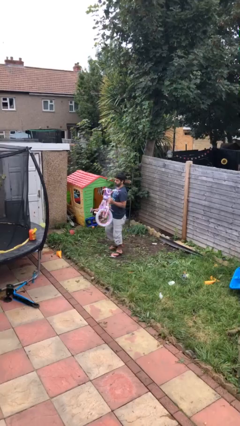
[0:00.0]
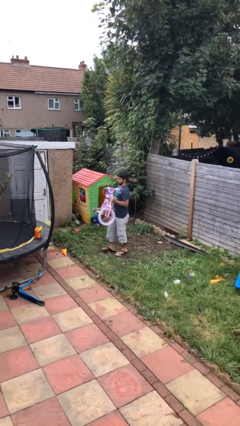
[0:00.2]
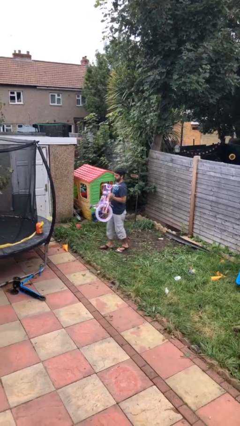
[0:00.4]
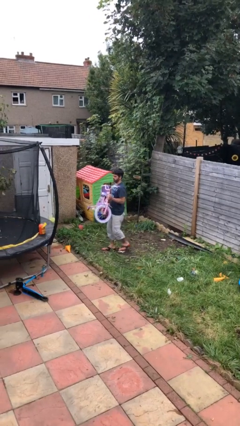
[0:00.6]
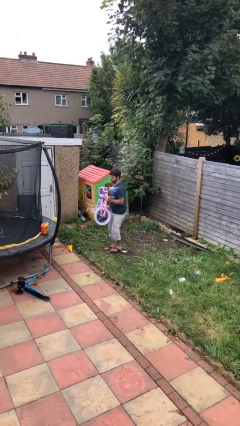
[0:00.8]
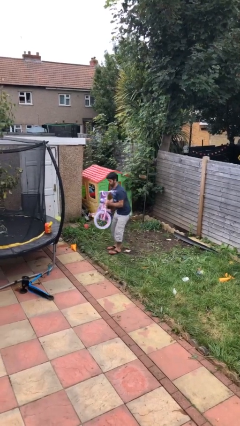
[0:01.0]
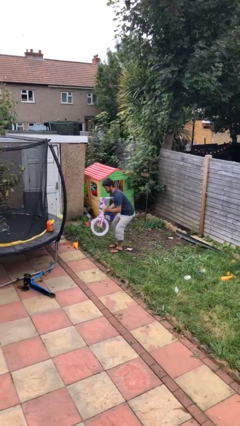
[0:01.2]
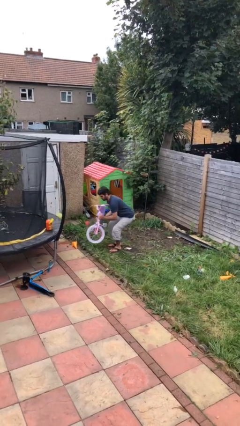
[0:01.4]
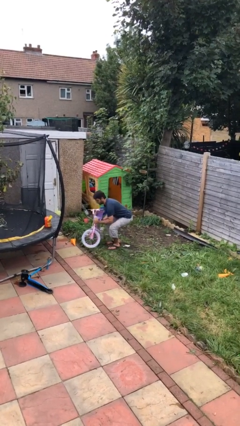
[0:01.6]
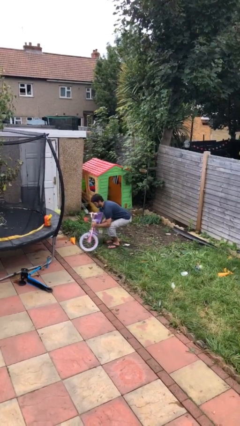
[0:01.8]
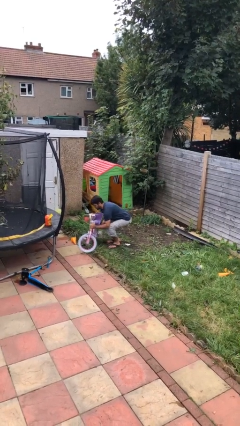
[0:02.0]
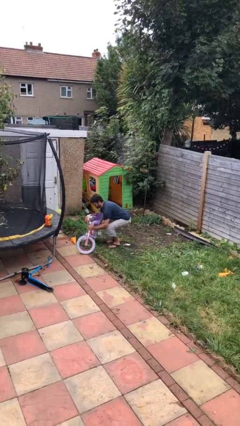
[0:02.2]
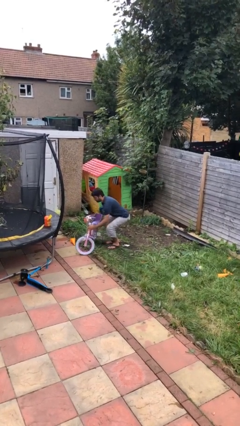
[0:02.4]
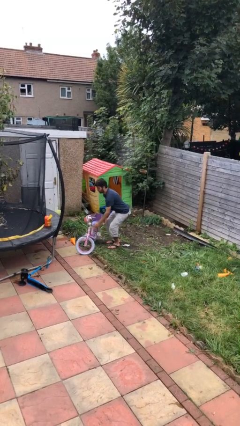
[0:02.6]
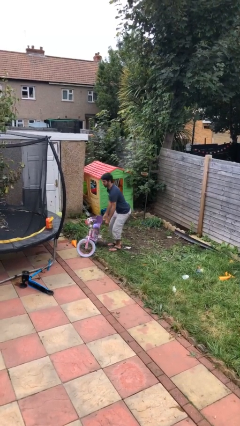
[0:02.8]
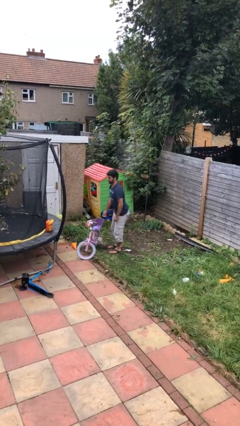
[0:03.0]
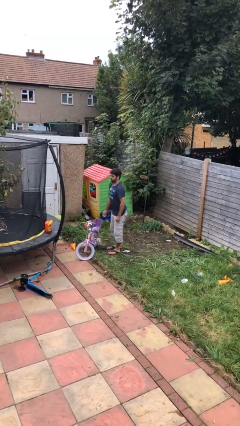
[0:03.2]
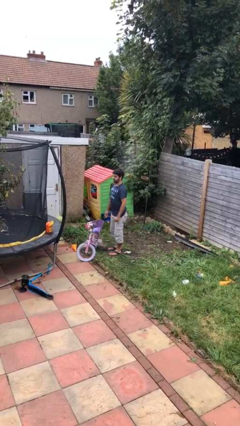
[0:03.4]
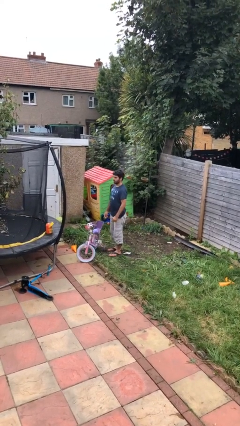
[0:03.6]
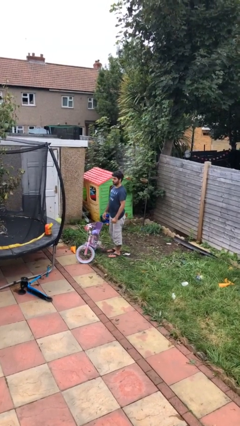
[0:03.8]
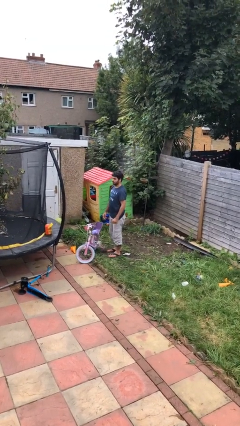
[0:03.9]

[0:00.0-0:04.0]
person puts down object on floor

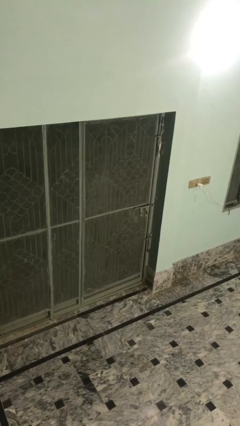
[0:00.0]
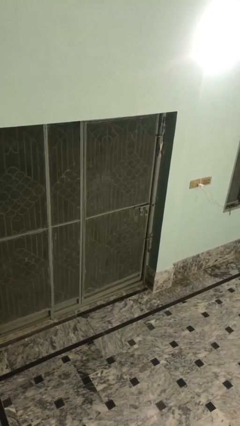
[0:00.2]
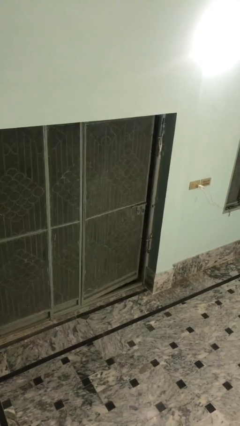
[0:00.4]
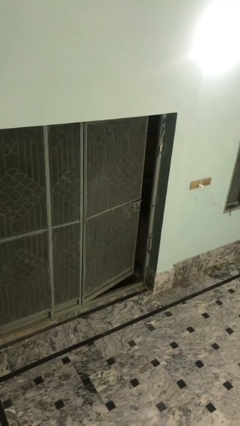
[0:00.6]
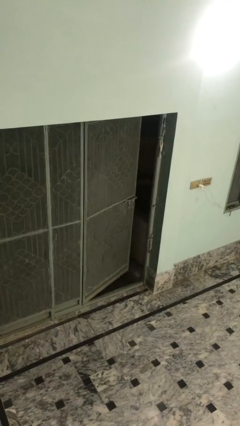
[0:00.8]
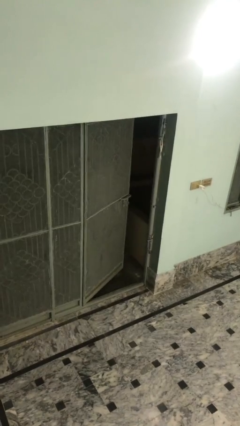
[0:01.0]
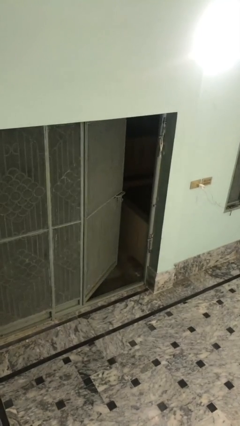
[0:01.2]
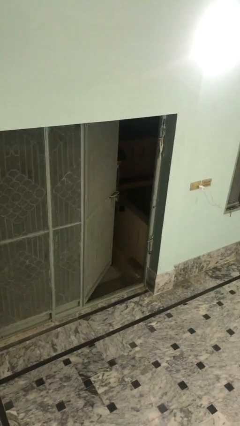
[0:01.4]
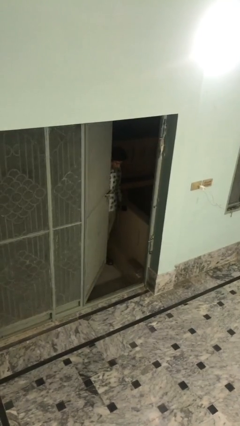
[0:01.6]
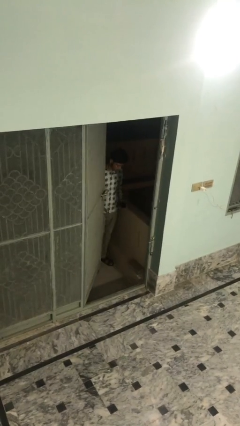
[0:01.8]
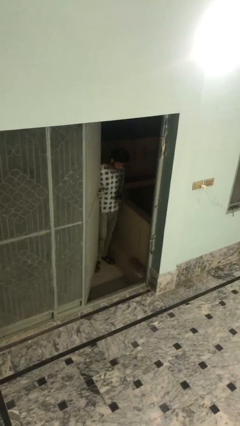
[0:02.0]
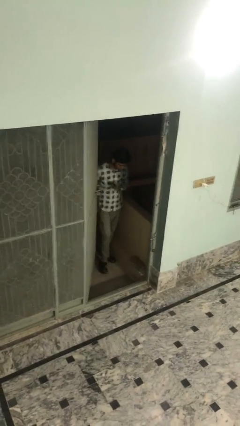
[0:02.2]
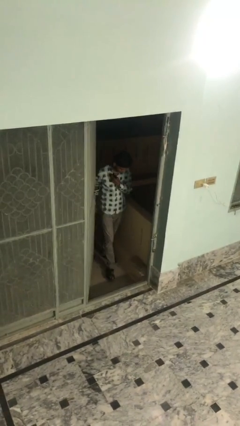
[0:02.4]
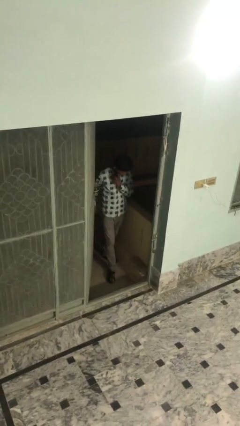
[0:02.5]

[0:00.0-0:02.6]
person opens facility door

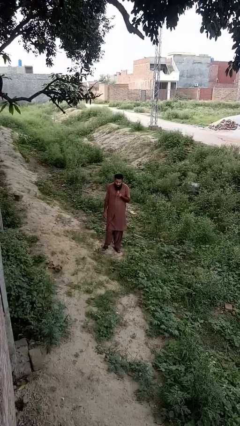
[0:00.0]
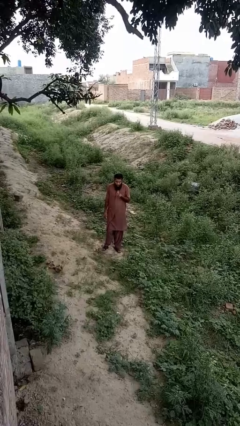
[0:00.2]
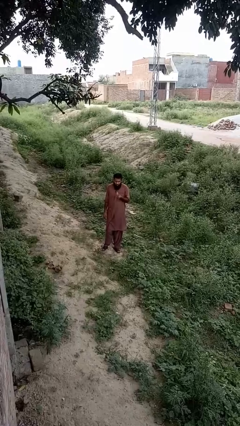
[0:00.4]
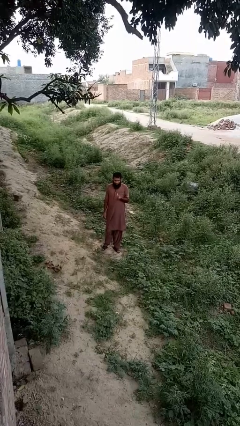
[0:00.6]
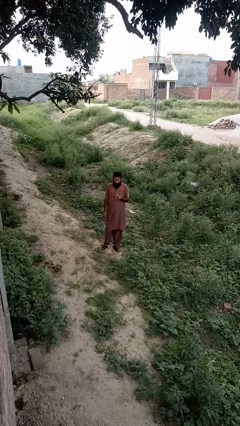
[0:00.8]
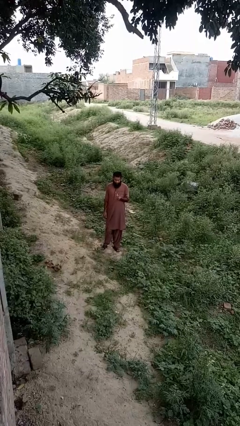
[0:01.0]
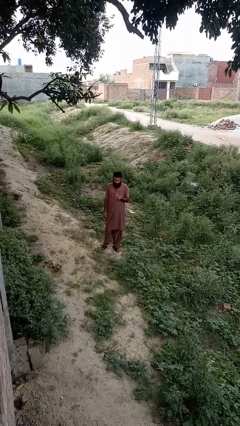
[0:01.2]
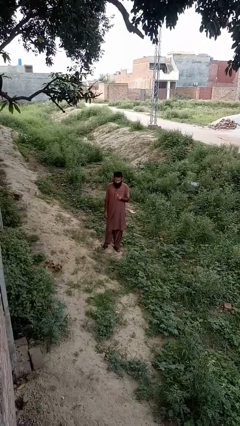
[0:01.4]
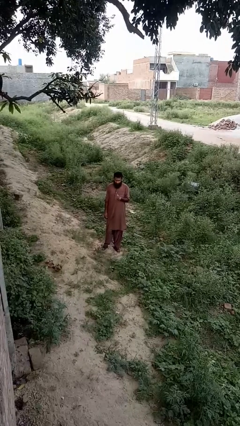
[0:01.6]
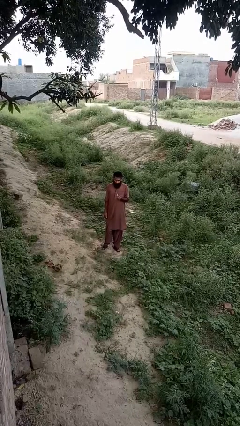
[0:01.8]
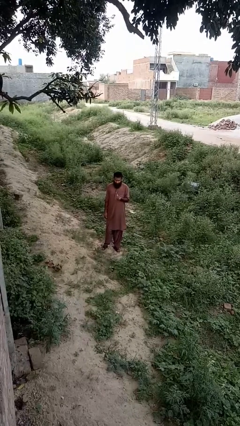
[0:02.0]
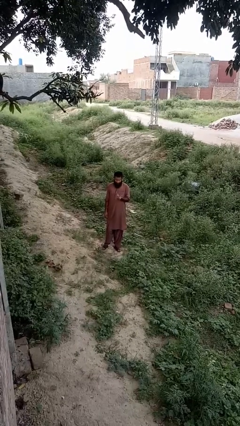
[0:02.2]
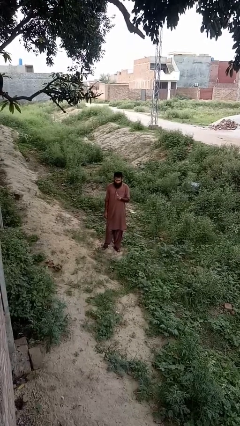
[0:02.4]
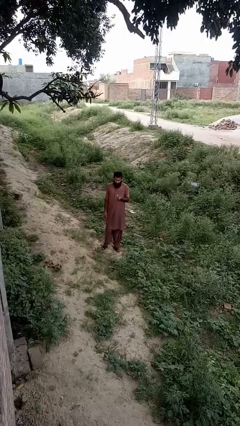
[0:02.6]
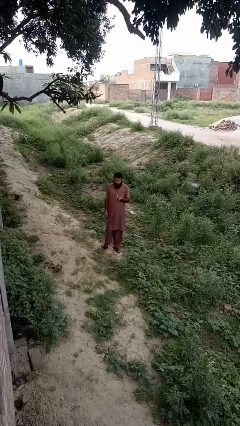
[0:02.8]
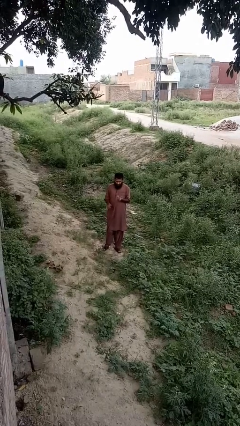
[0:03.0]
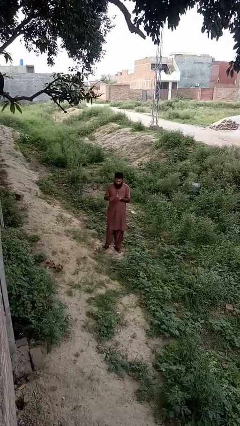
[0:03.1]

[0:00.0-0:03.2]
person extinguishes candle

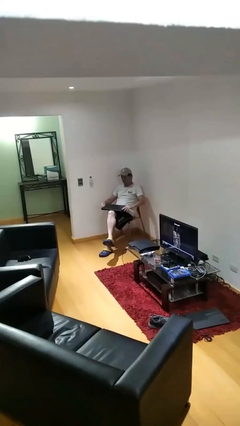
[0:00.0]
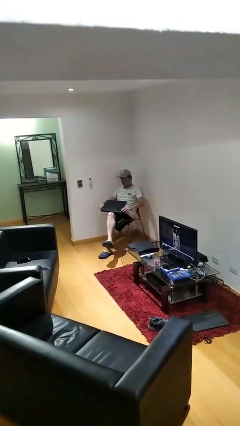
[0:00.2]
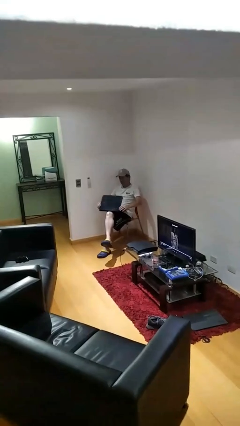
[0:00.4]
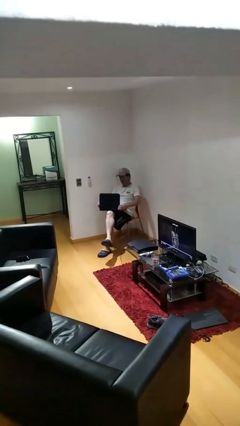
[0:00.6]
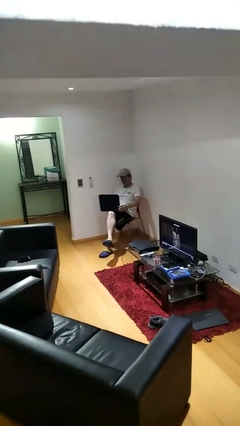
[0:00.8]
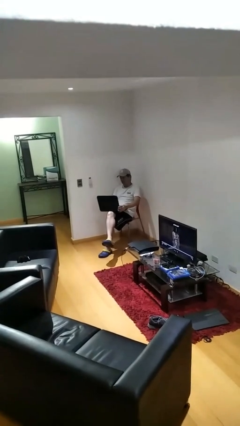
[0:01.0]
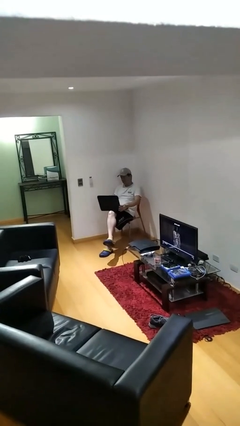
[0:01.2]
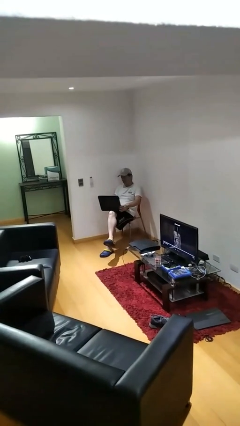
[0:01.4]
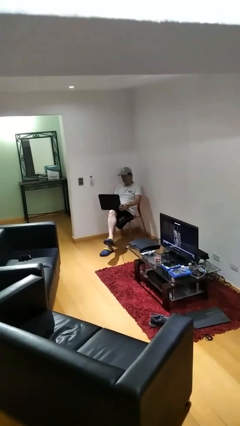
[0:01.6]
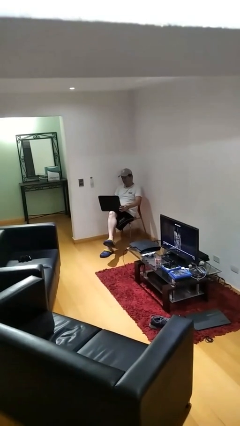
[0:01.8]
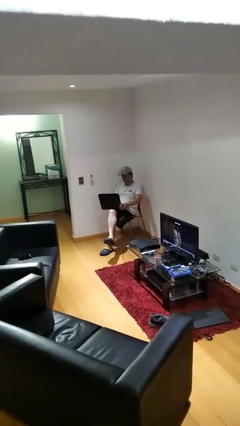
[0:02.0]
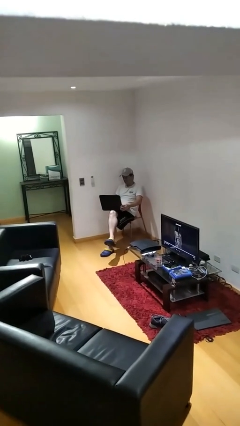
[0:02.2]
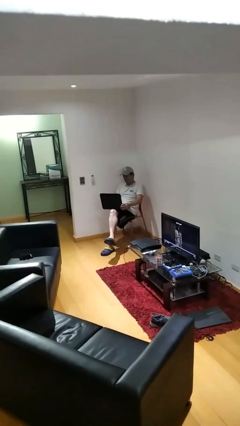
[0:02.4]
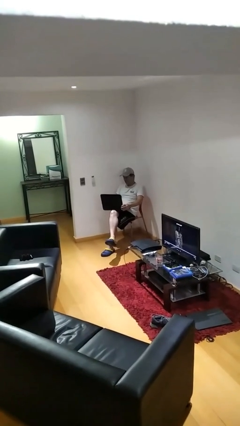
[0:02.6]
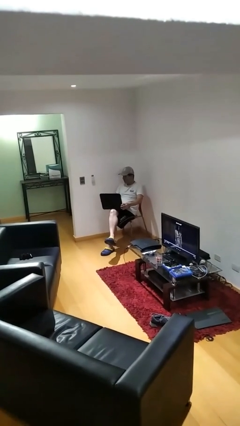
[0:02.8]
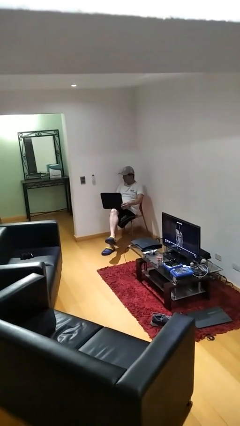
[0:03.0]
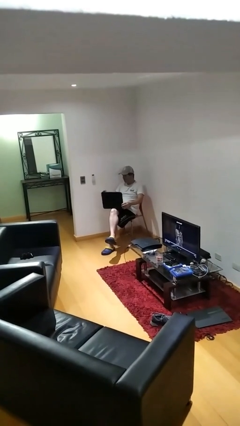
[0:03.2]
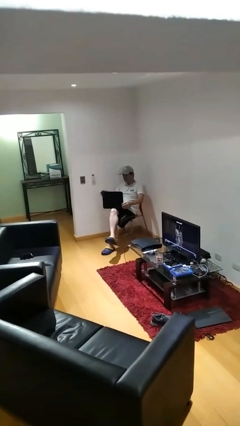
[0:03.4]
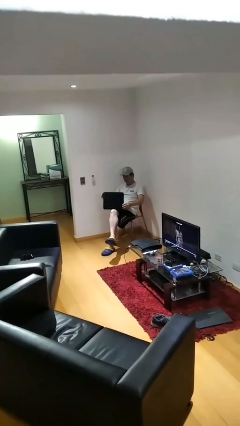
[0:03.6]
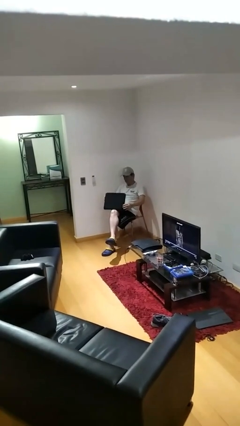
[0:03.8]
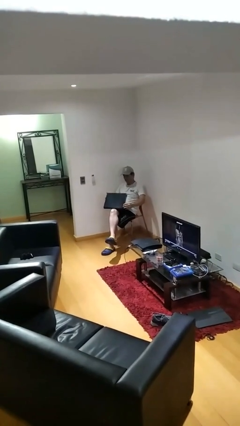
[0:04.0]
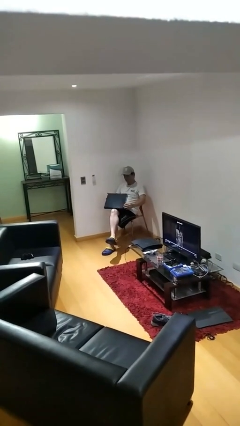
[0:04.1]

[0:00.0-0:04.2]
person interacts with laptop

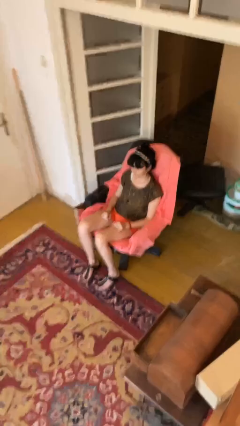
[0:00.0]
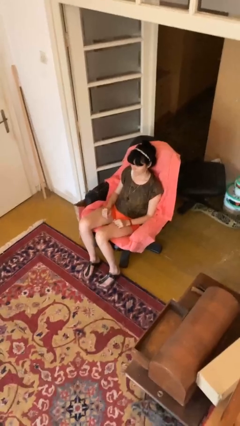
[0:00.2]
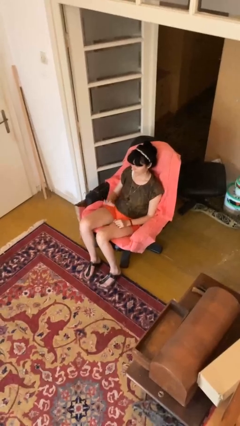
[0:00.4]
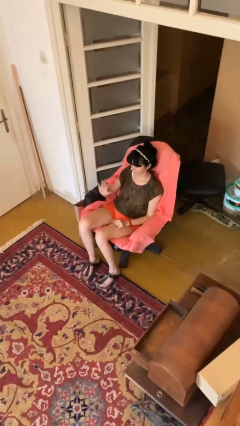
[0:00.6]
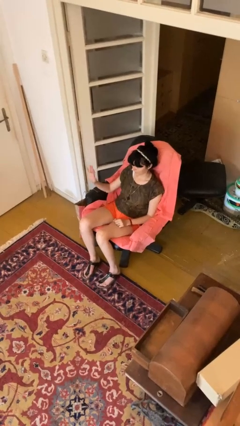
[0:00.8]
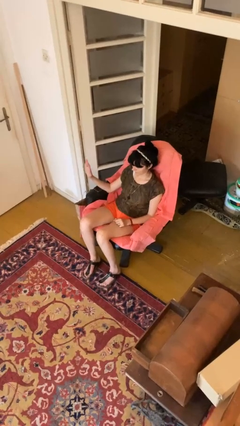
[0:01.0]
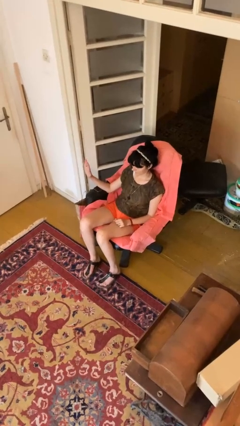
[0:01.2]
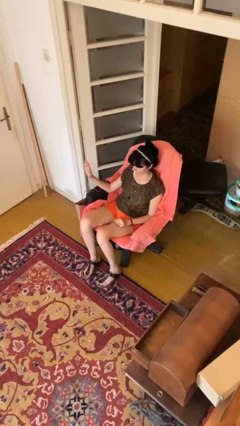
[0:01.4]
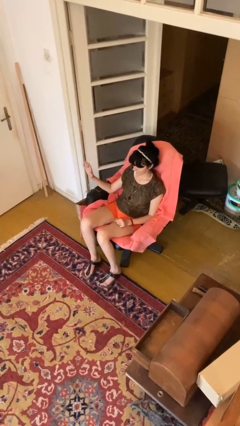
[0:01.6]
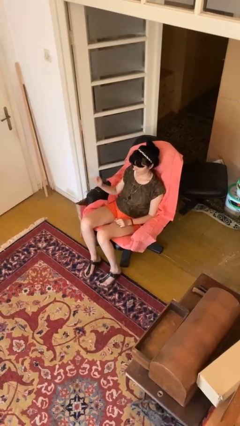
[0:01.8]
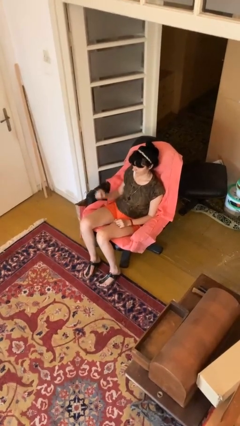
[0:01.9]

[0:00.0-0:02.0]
person gestures swipe right

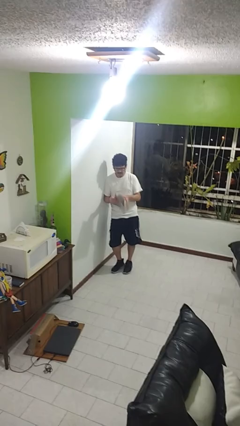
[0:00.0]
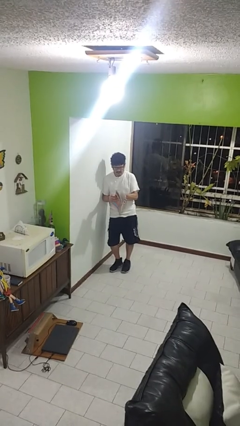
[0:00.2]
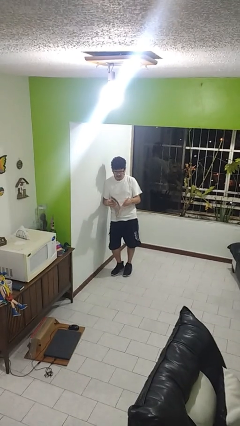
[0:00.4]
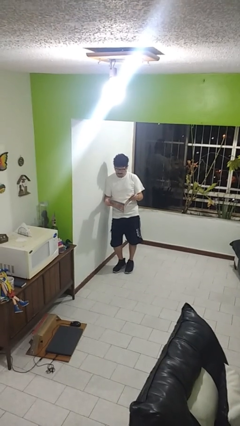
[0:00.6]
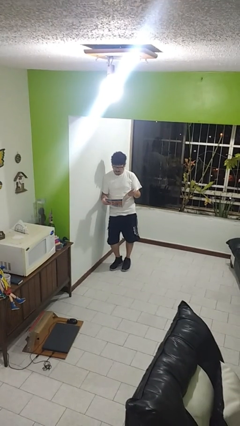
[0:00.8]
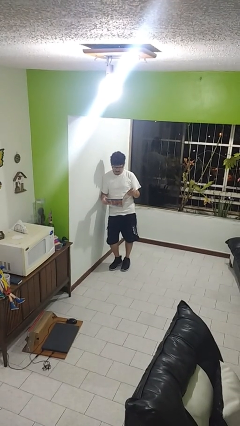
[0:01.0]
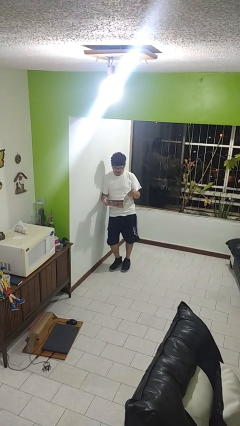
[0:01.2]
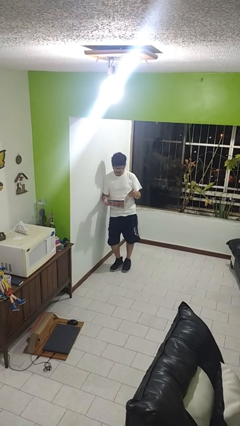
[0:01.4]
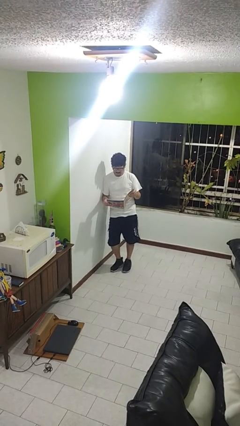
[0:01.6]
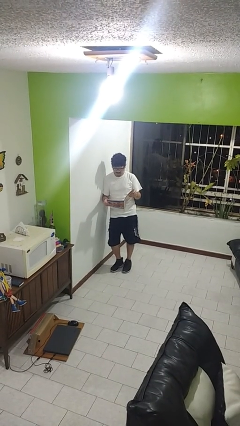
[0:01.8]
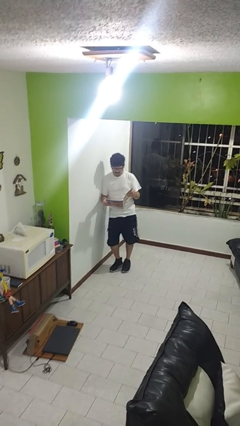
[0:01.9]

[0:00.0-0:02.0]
person reads magazine
